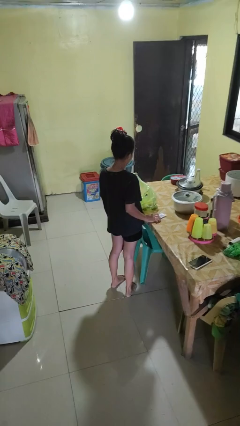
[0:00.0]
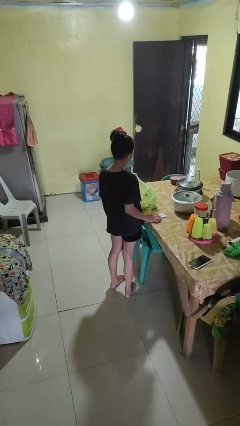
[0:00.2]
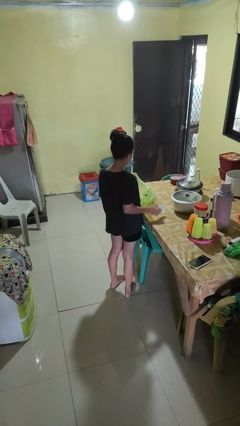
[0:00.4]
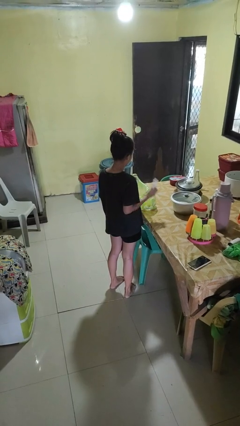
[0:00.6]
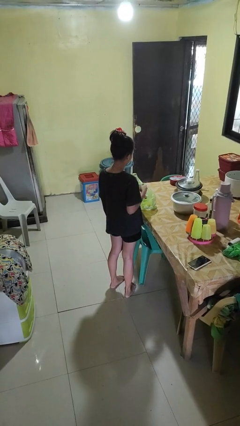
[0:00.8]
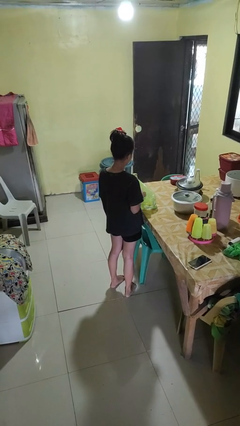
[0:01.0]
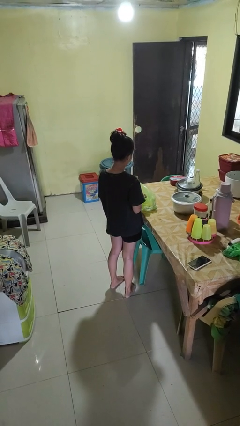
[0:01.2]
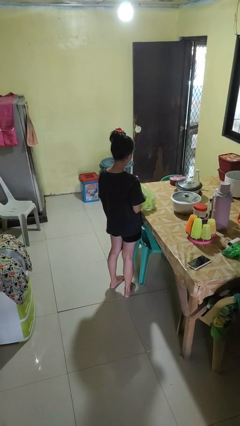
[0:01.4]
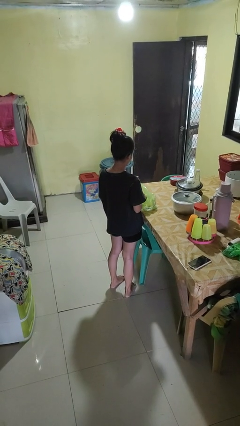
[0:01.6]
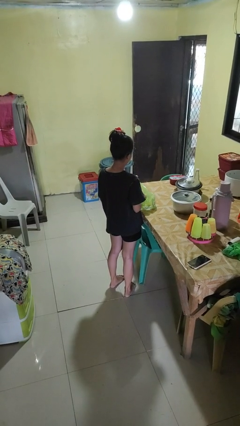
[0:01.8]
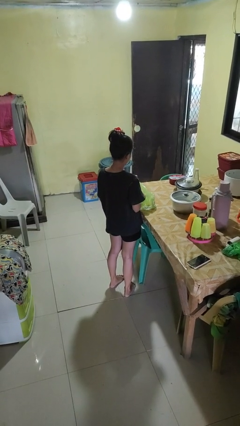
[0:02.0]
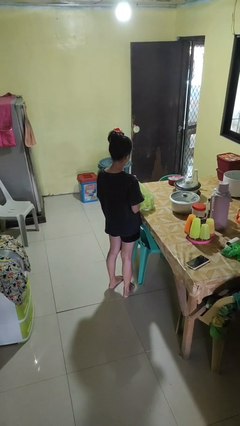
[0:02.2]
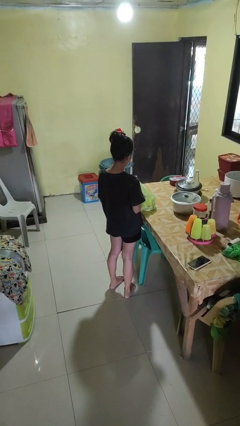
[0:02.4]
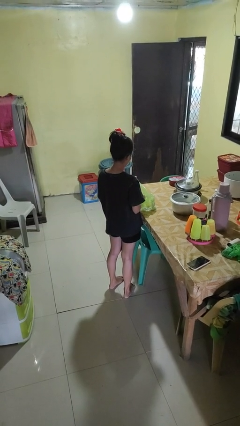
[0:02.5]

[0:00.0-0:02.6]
person puts object into bag

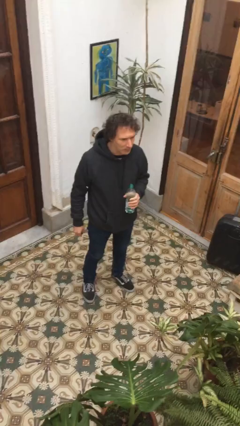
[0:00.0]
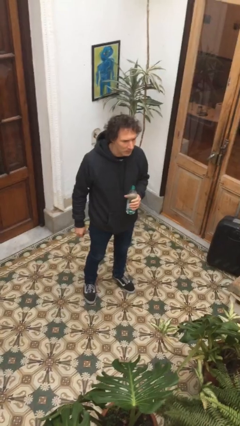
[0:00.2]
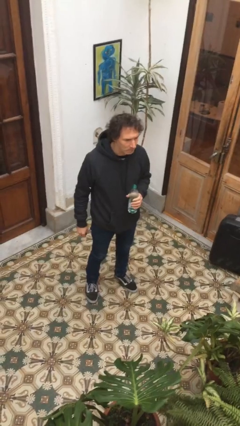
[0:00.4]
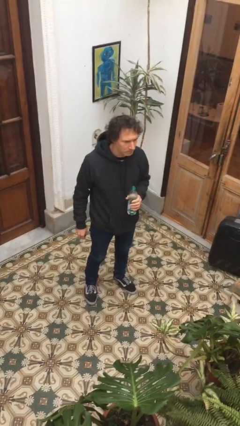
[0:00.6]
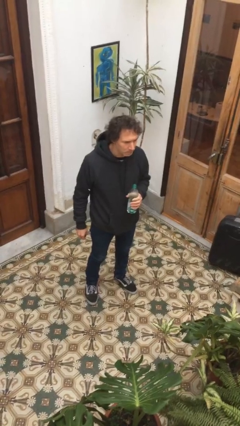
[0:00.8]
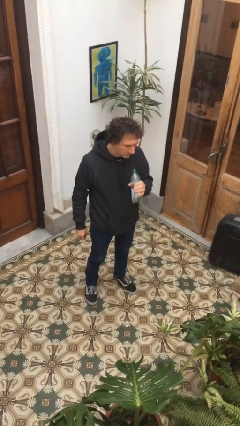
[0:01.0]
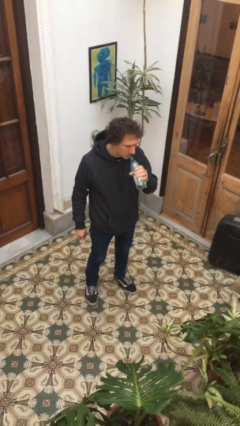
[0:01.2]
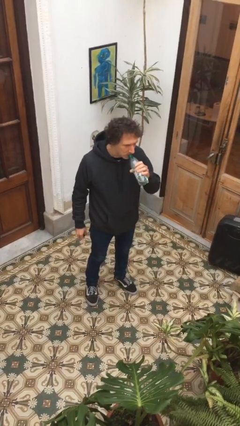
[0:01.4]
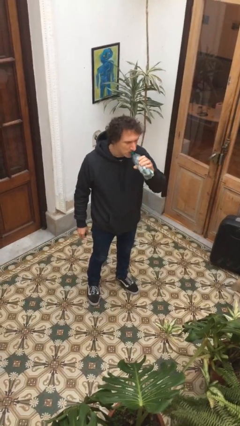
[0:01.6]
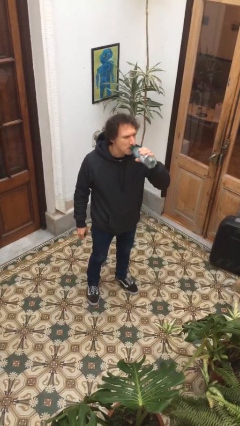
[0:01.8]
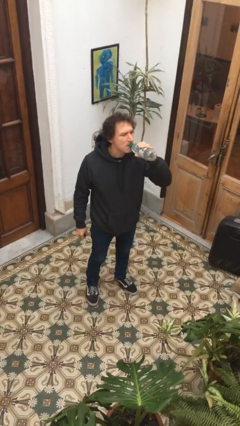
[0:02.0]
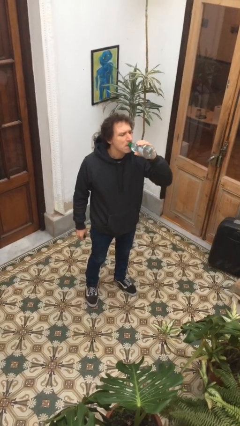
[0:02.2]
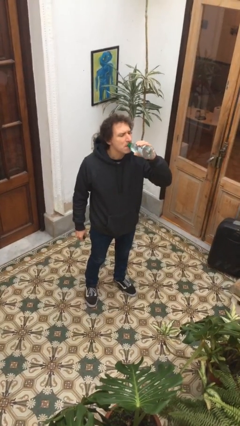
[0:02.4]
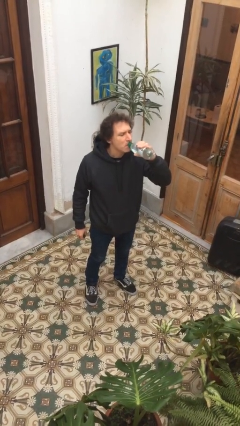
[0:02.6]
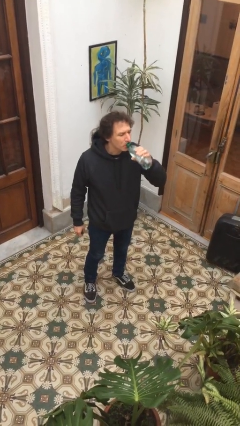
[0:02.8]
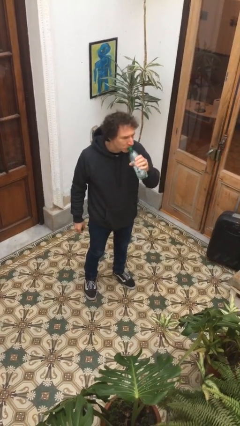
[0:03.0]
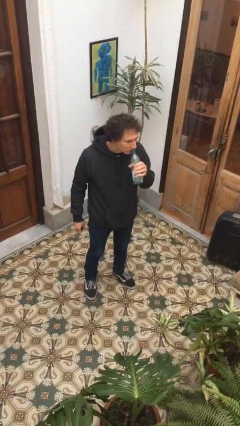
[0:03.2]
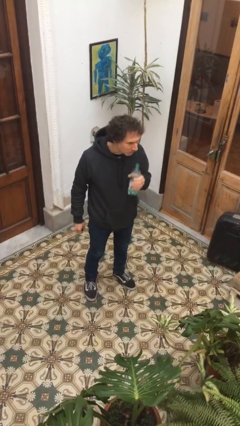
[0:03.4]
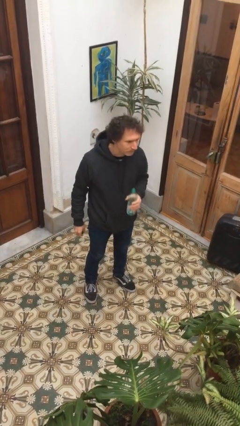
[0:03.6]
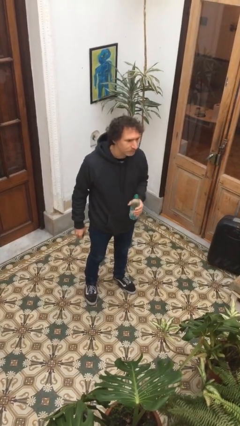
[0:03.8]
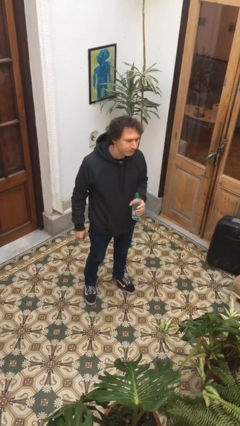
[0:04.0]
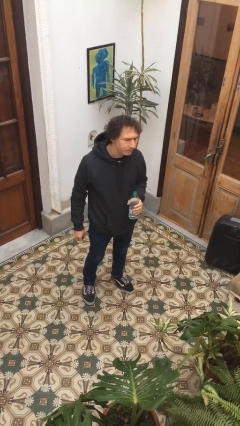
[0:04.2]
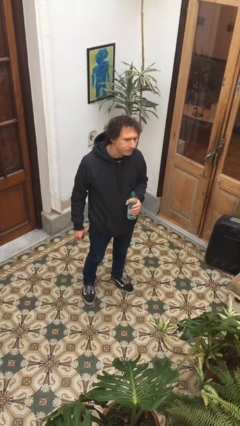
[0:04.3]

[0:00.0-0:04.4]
person drinks from bottle

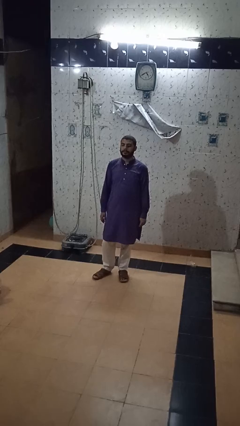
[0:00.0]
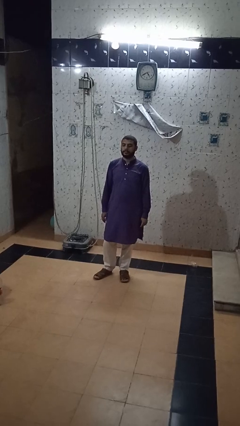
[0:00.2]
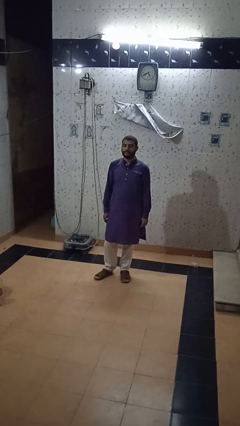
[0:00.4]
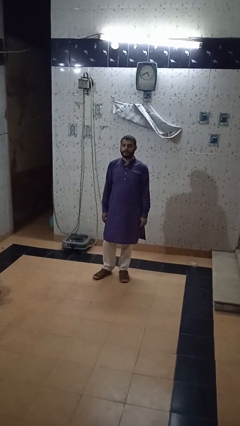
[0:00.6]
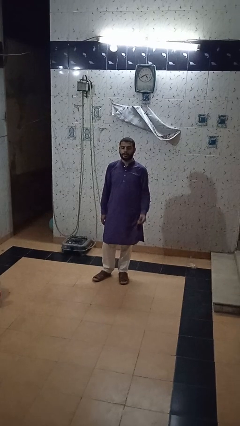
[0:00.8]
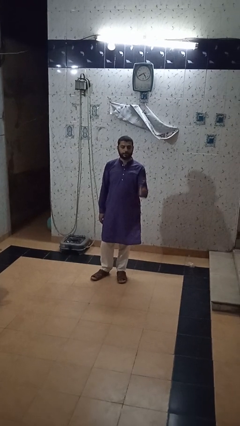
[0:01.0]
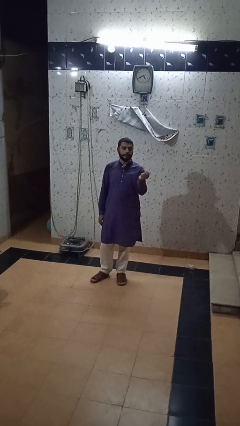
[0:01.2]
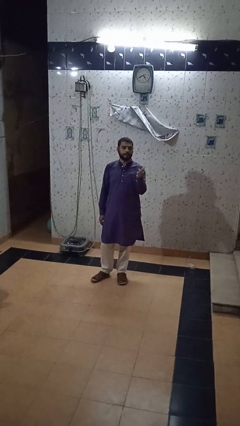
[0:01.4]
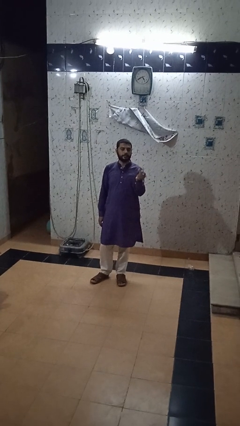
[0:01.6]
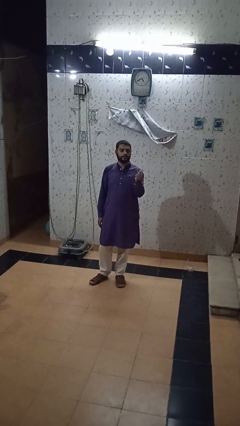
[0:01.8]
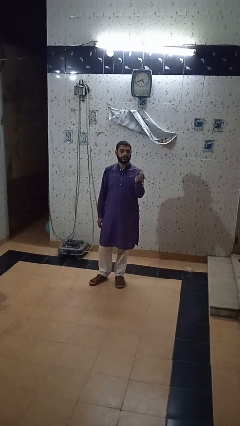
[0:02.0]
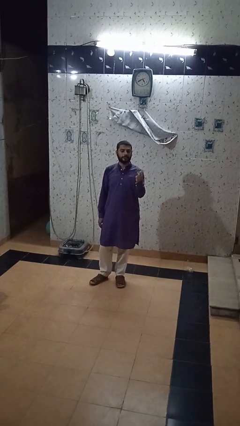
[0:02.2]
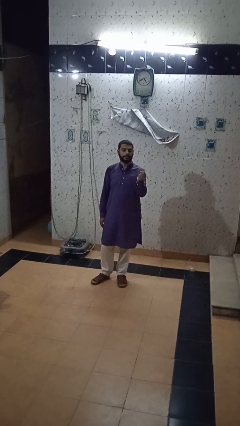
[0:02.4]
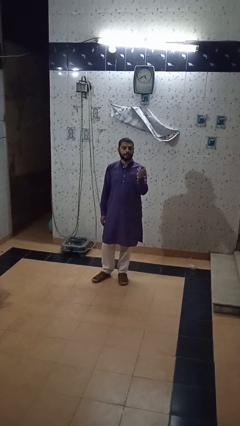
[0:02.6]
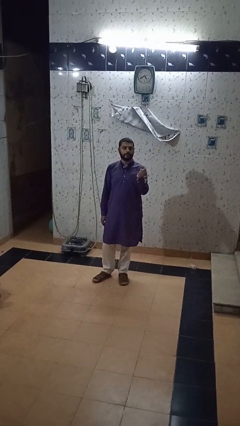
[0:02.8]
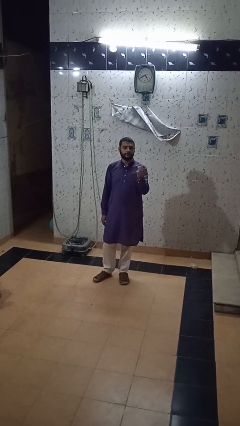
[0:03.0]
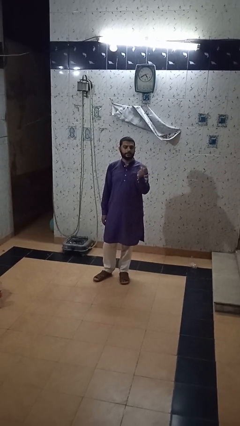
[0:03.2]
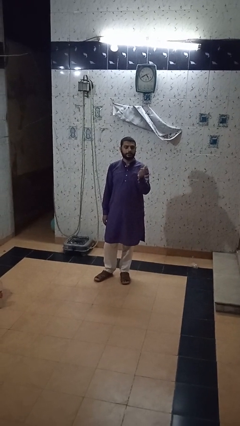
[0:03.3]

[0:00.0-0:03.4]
person snaps fingers

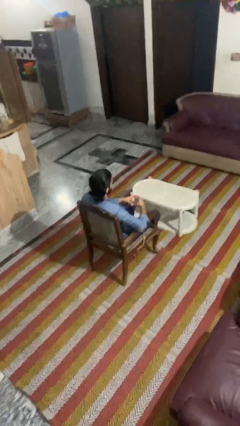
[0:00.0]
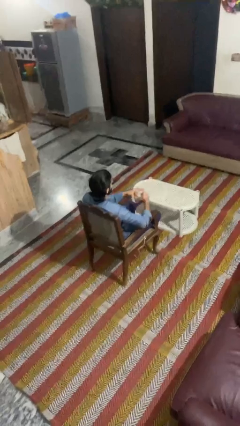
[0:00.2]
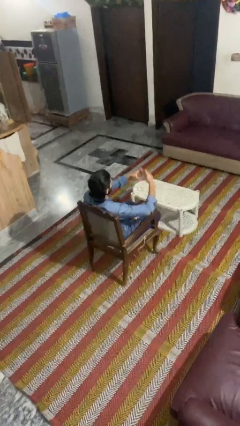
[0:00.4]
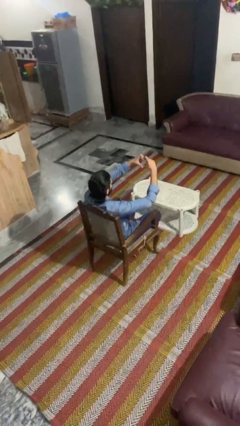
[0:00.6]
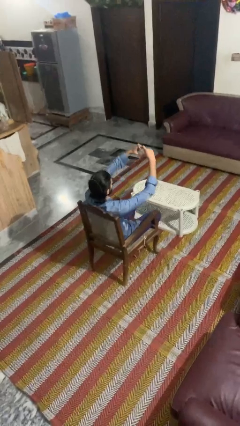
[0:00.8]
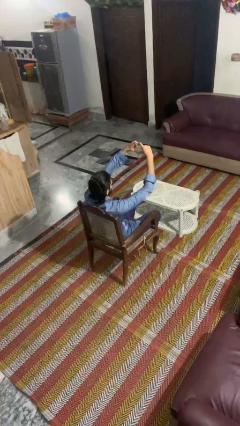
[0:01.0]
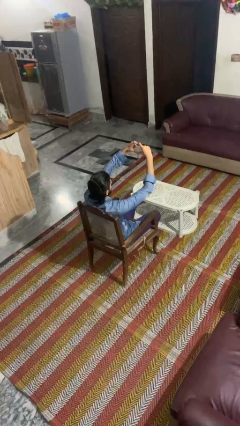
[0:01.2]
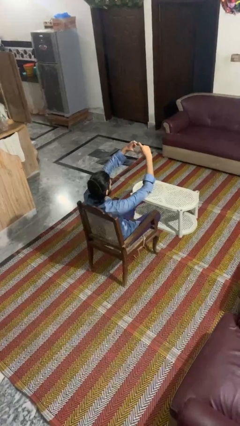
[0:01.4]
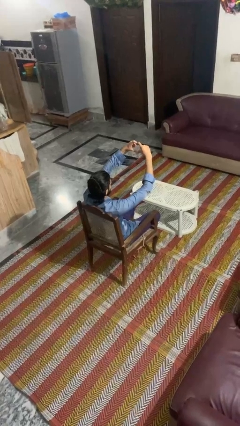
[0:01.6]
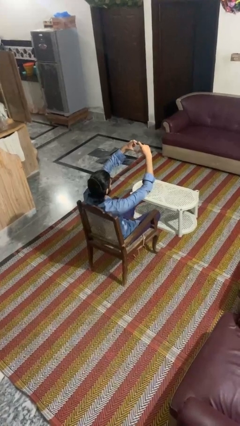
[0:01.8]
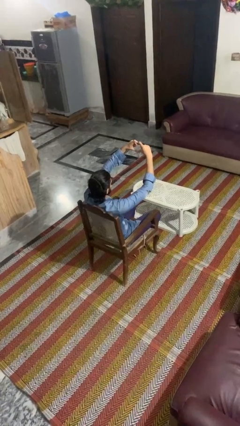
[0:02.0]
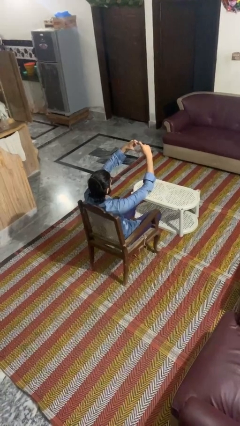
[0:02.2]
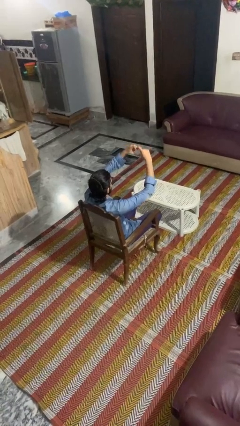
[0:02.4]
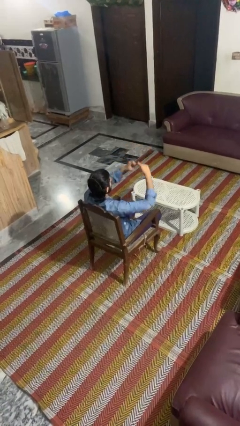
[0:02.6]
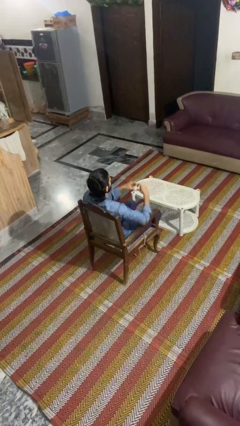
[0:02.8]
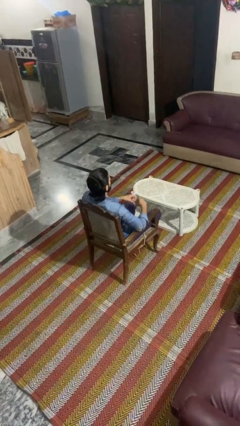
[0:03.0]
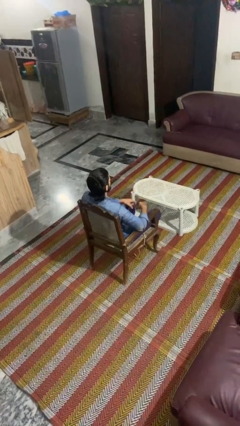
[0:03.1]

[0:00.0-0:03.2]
person gestures heart

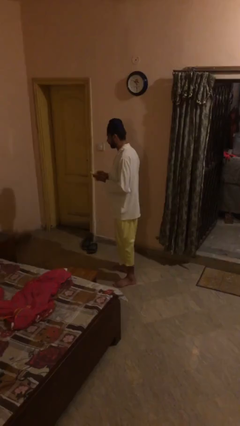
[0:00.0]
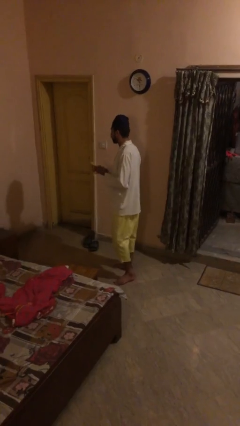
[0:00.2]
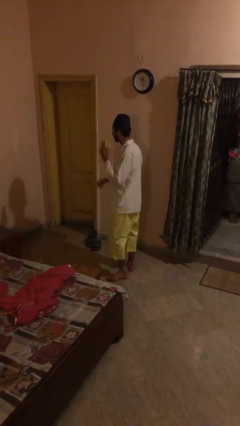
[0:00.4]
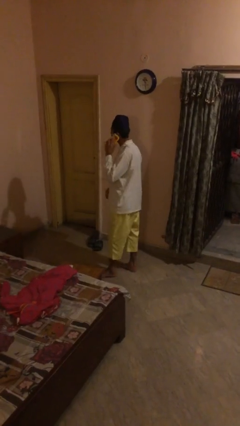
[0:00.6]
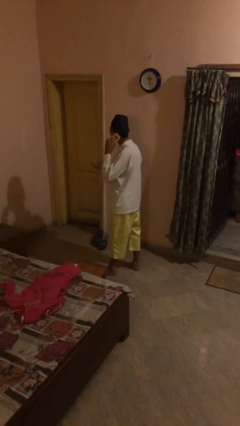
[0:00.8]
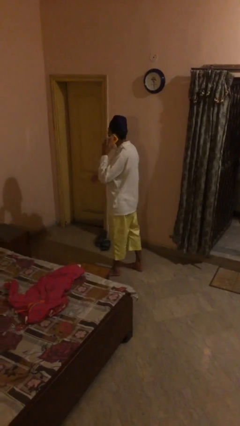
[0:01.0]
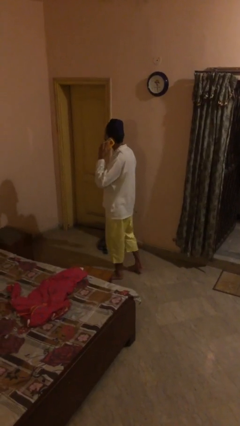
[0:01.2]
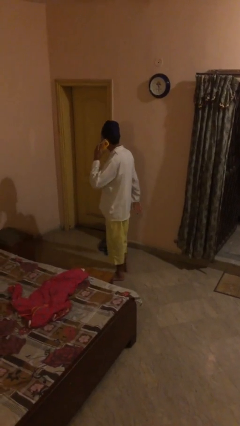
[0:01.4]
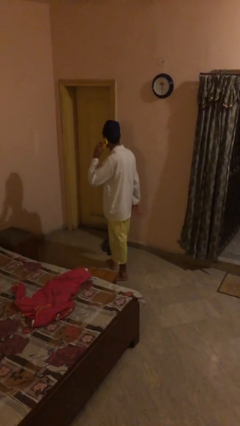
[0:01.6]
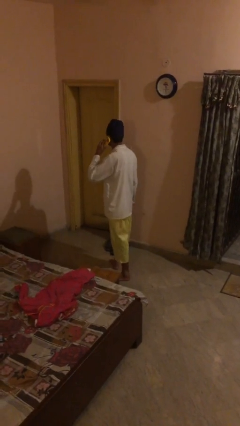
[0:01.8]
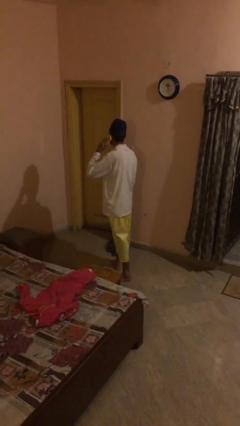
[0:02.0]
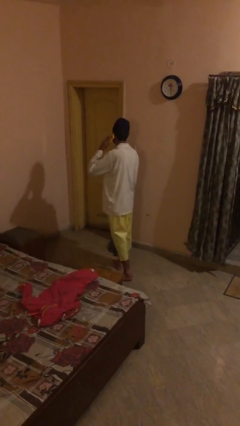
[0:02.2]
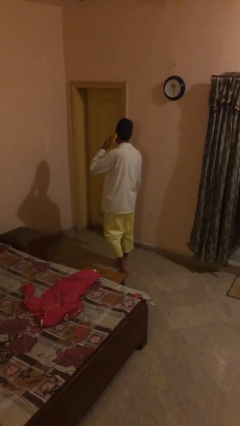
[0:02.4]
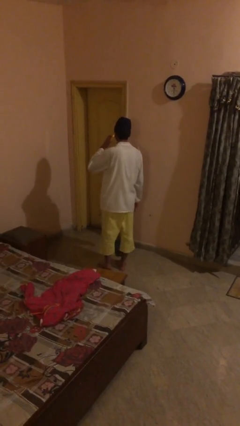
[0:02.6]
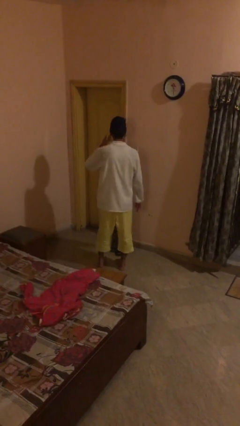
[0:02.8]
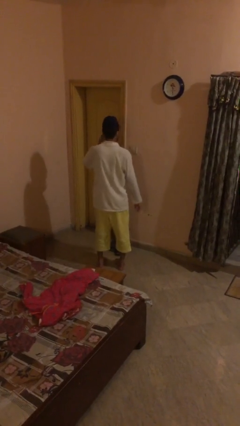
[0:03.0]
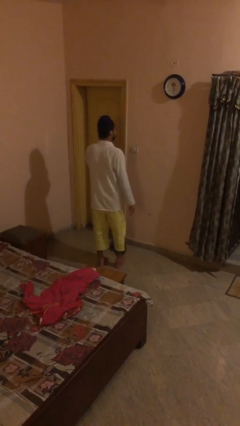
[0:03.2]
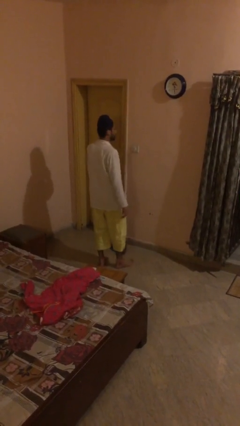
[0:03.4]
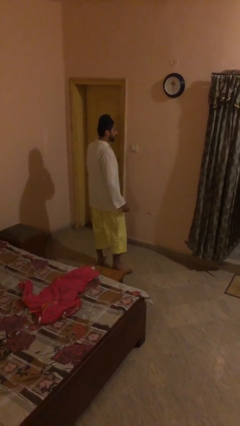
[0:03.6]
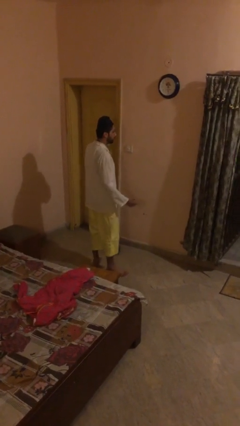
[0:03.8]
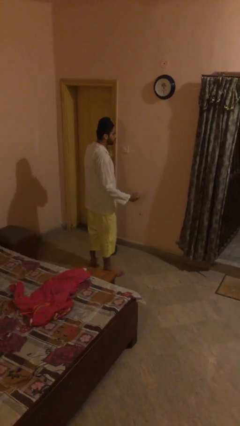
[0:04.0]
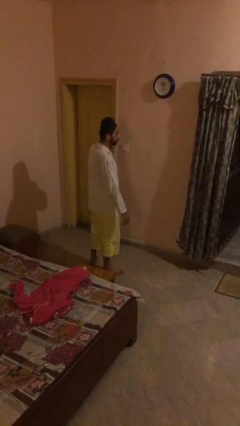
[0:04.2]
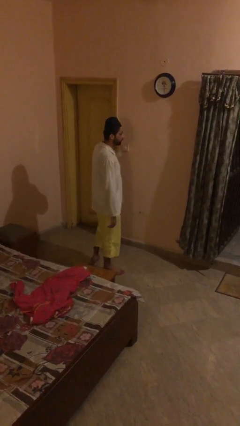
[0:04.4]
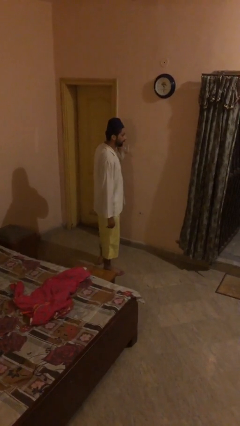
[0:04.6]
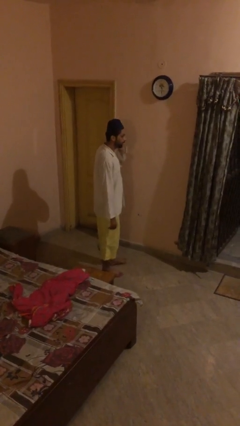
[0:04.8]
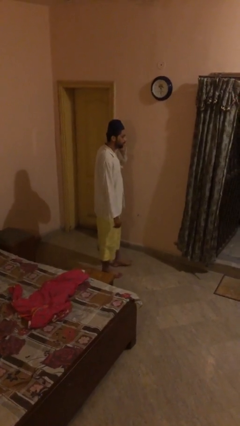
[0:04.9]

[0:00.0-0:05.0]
person talks on phone
